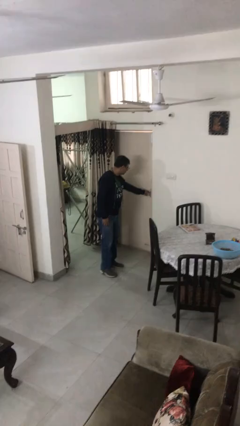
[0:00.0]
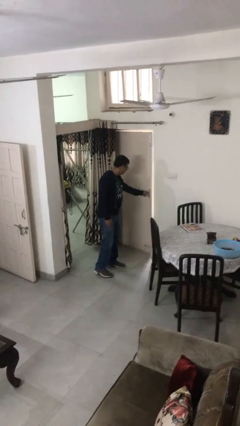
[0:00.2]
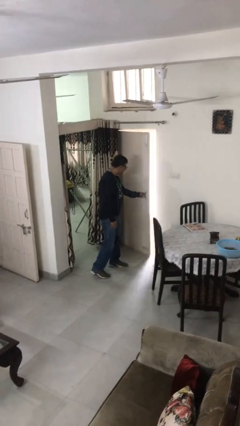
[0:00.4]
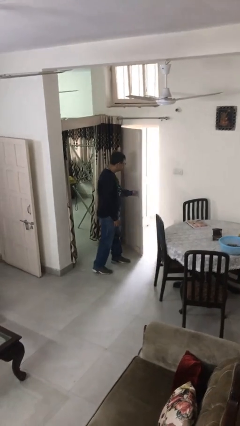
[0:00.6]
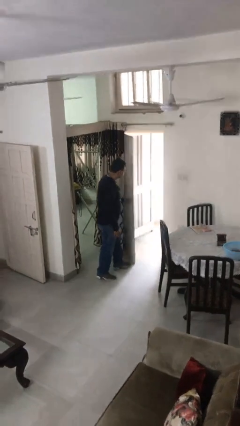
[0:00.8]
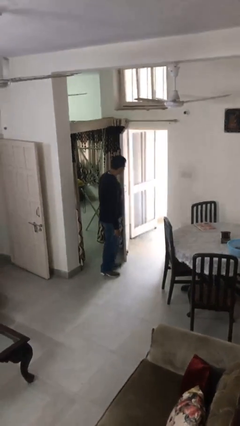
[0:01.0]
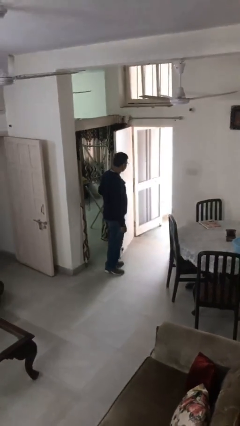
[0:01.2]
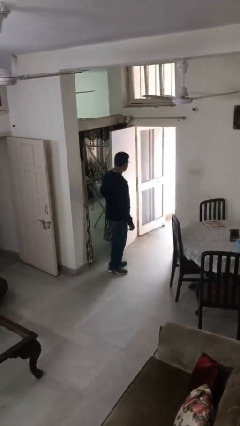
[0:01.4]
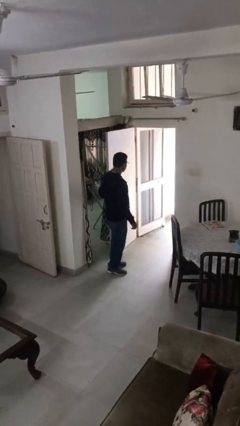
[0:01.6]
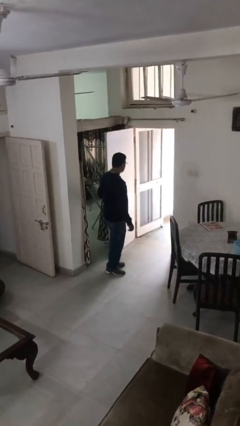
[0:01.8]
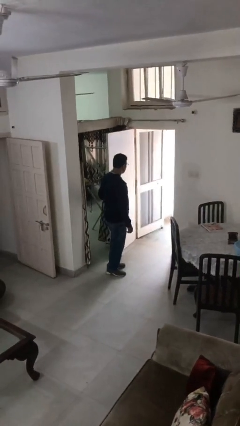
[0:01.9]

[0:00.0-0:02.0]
person opens facility door

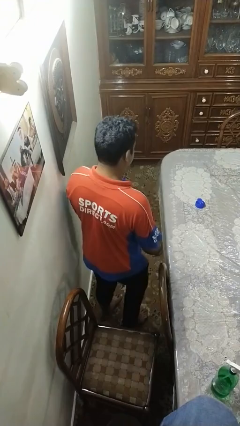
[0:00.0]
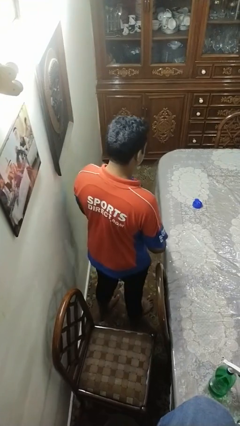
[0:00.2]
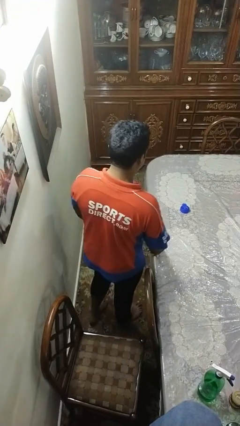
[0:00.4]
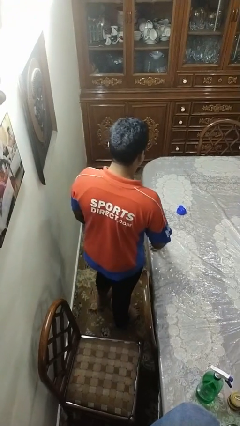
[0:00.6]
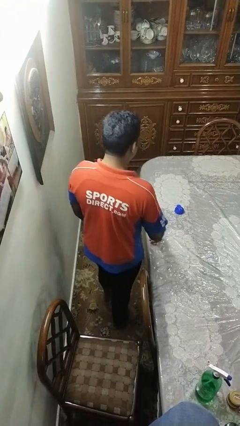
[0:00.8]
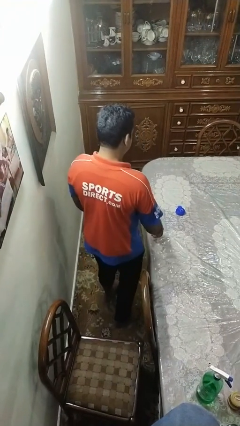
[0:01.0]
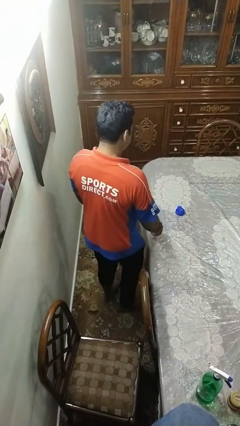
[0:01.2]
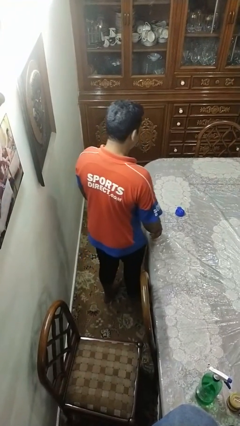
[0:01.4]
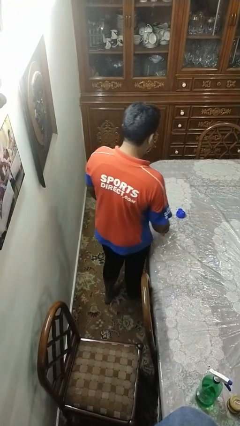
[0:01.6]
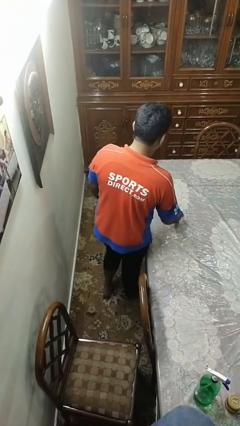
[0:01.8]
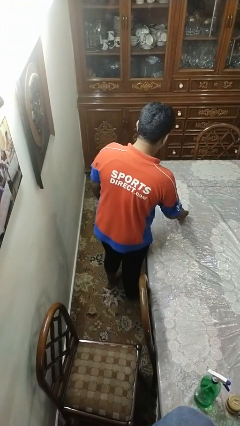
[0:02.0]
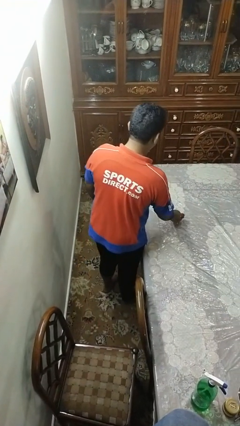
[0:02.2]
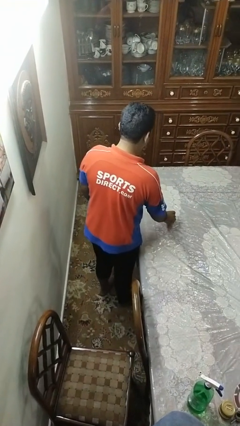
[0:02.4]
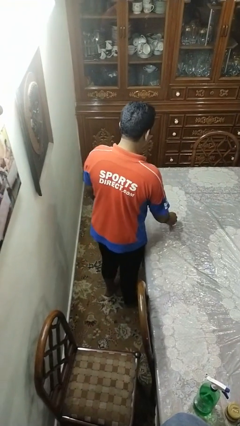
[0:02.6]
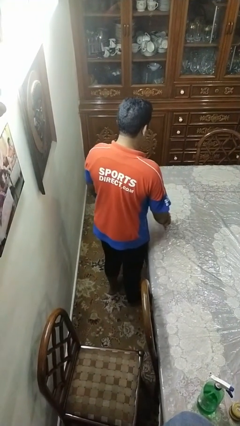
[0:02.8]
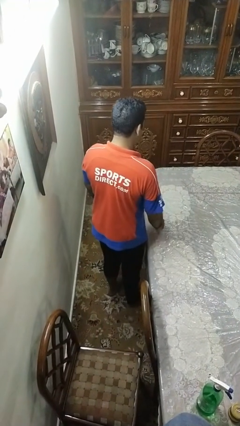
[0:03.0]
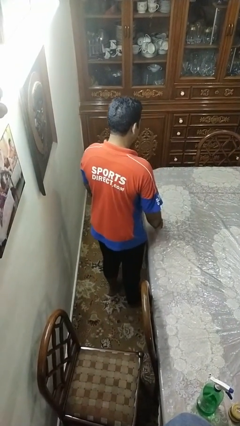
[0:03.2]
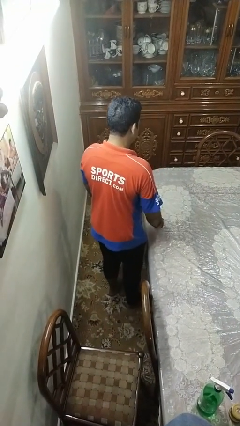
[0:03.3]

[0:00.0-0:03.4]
person picks up object from table

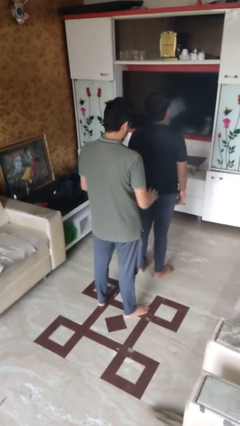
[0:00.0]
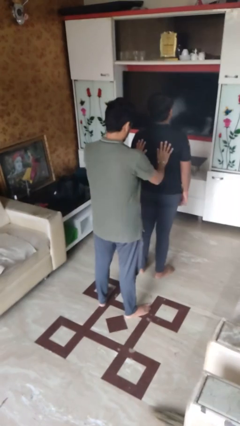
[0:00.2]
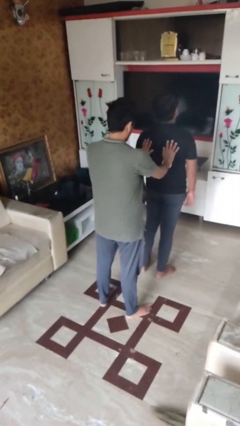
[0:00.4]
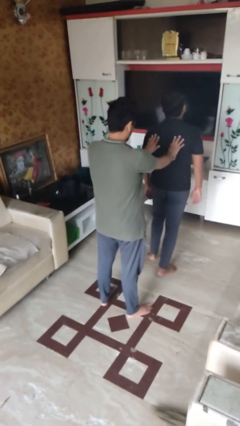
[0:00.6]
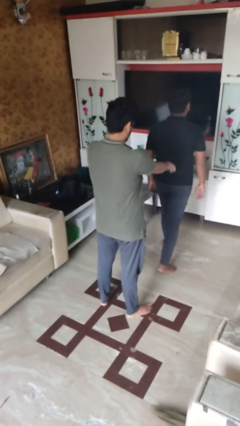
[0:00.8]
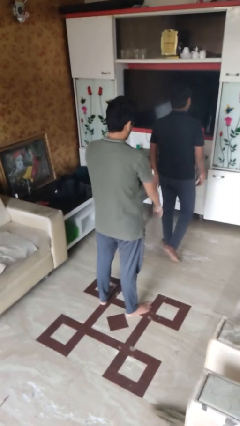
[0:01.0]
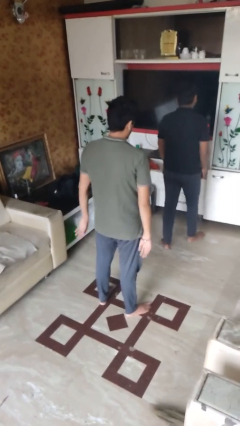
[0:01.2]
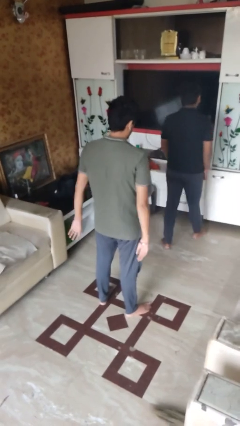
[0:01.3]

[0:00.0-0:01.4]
person shoves person

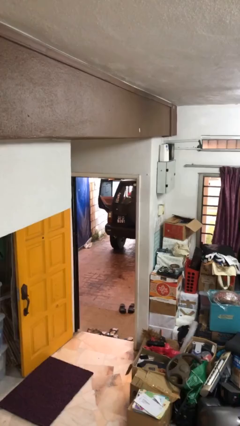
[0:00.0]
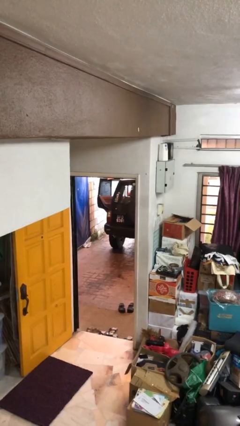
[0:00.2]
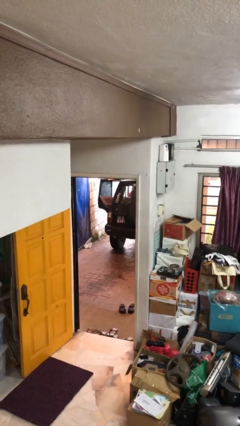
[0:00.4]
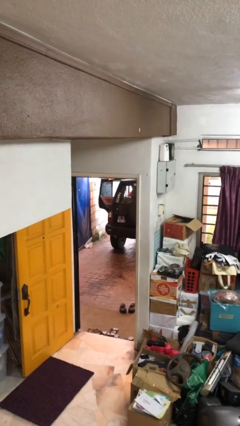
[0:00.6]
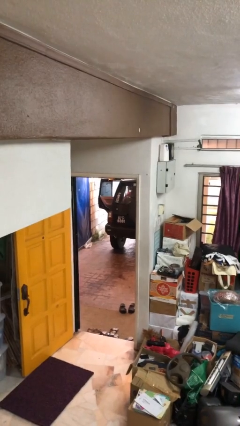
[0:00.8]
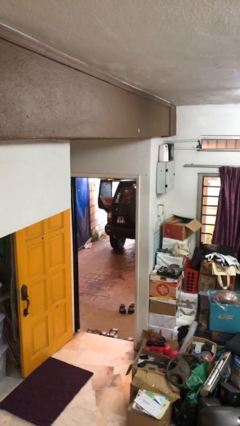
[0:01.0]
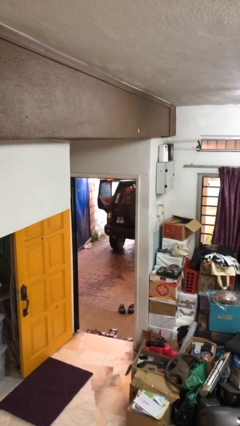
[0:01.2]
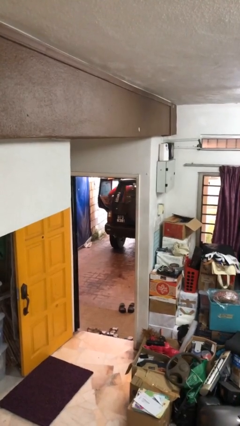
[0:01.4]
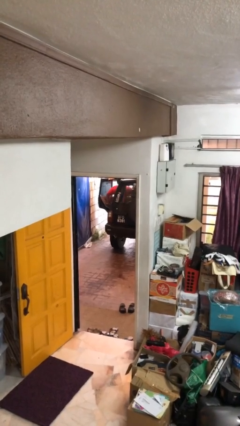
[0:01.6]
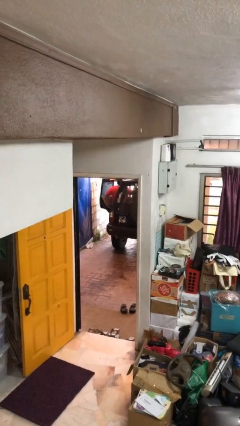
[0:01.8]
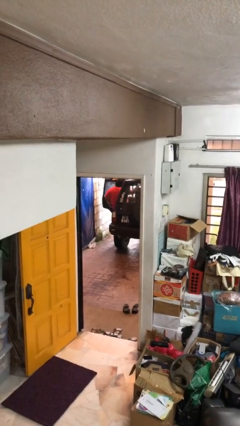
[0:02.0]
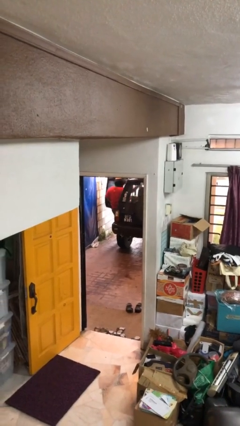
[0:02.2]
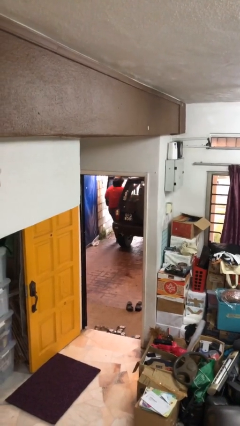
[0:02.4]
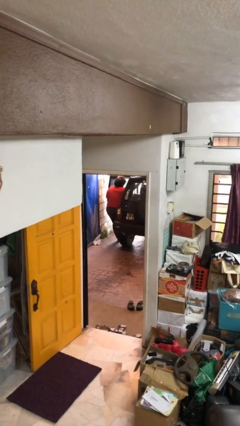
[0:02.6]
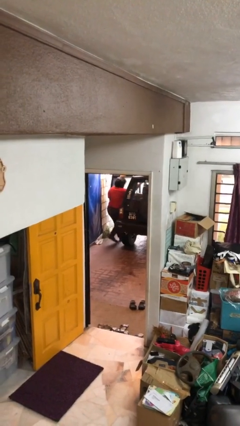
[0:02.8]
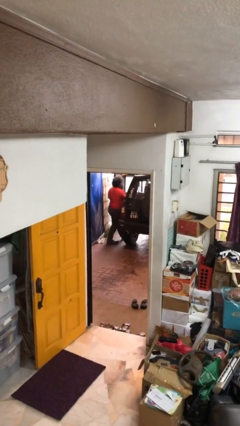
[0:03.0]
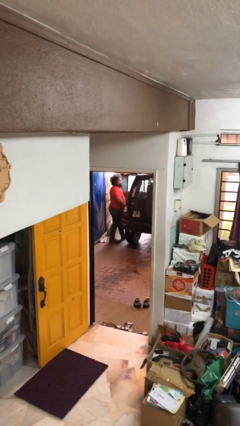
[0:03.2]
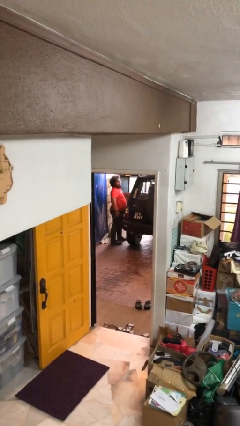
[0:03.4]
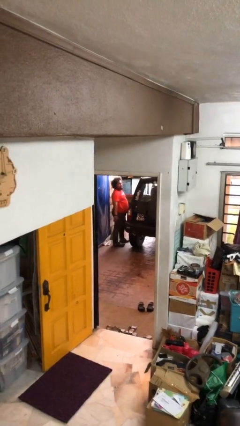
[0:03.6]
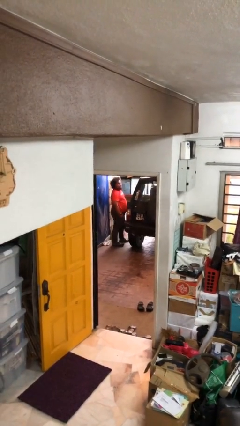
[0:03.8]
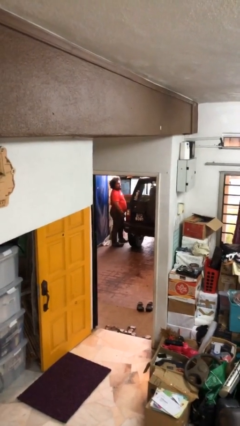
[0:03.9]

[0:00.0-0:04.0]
person exits car

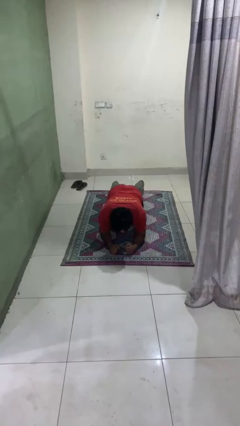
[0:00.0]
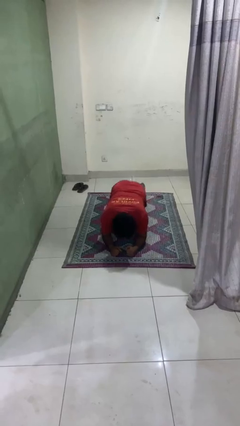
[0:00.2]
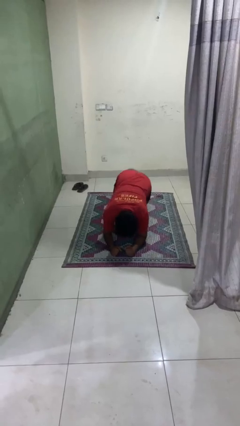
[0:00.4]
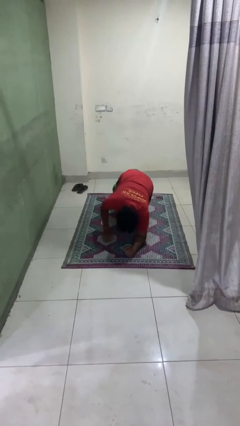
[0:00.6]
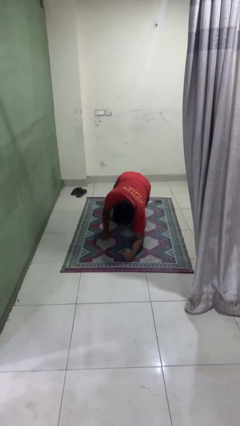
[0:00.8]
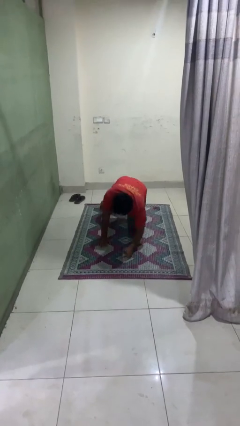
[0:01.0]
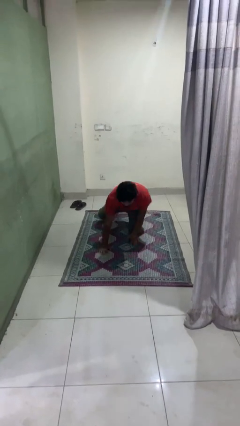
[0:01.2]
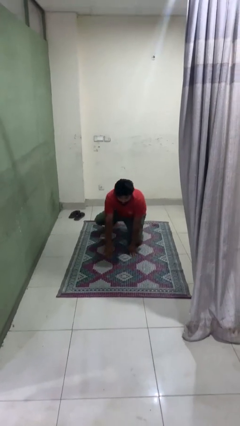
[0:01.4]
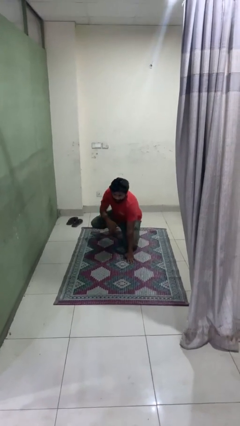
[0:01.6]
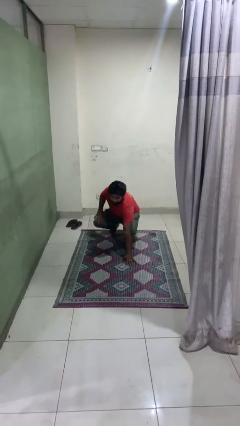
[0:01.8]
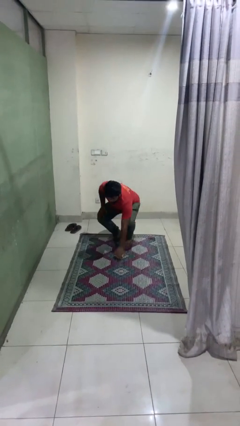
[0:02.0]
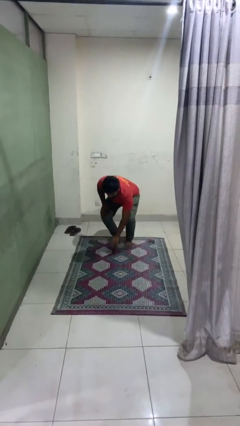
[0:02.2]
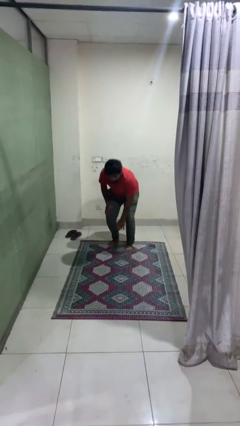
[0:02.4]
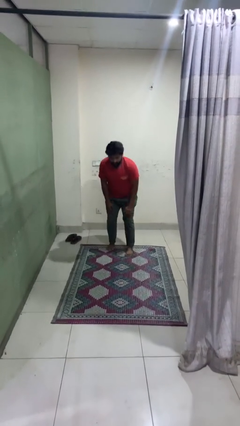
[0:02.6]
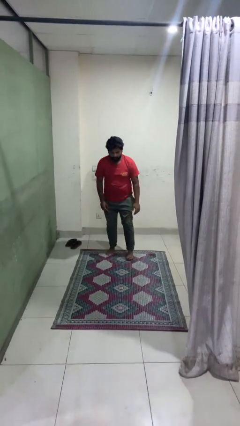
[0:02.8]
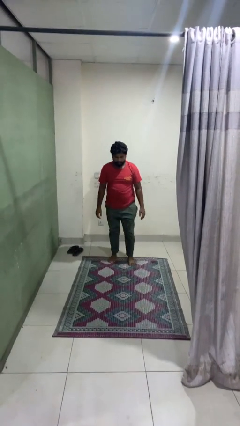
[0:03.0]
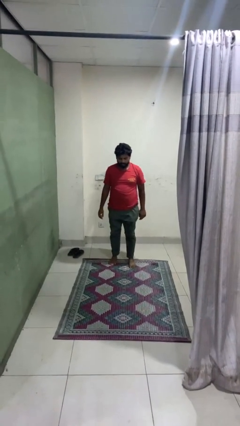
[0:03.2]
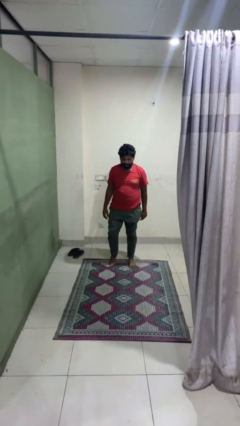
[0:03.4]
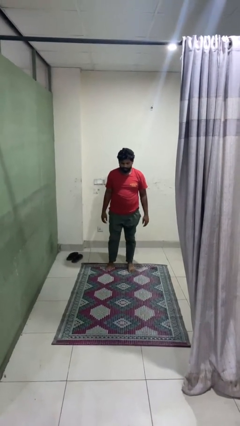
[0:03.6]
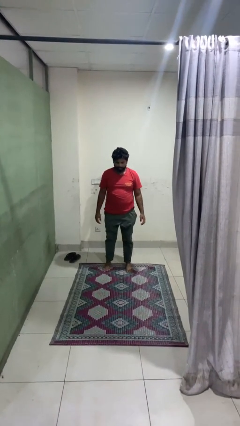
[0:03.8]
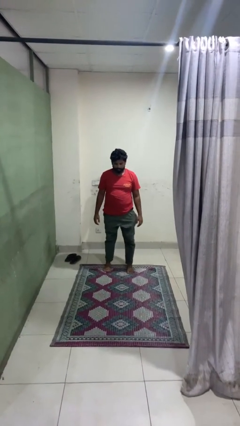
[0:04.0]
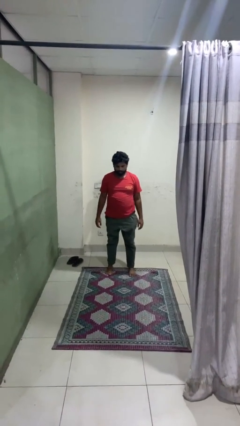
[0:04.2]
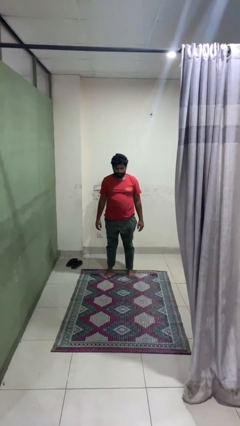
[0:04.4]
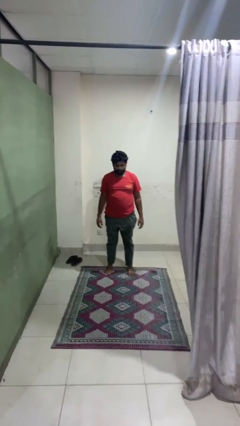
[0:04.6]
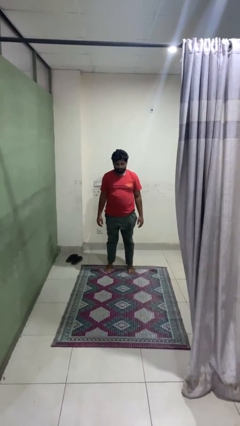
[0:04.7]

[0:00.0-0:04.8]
person stands up from floor

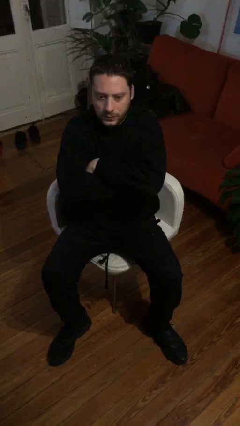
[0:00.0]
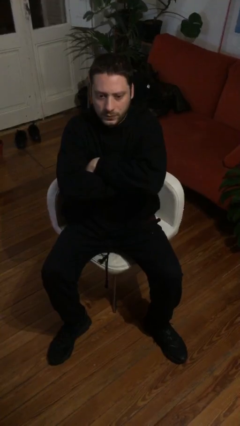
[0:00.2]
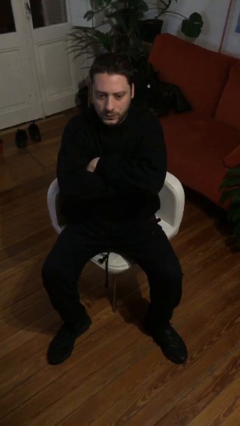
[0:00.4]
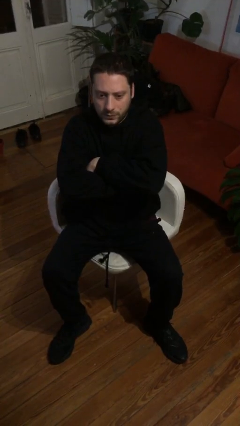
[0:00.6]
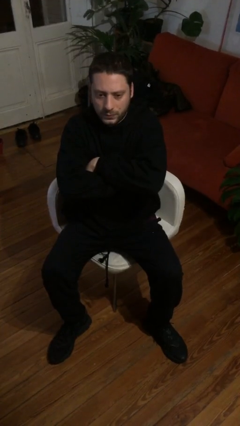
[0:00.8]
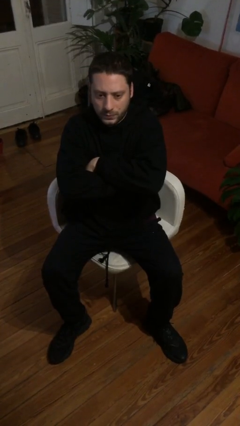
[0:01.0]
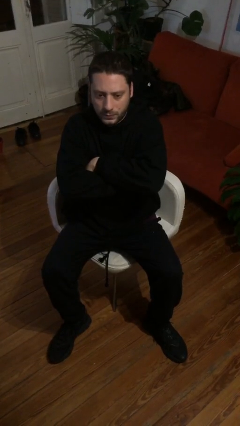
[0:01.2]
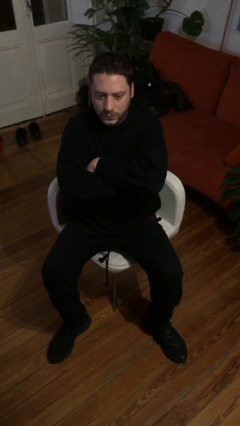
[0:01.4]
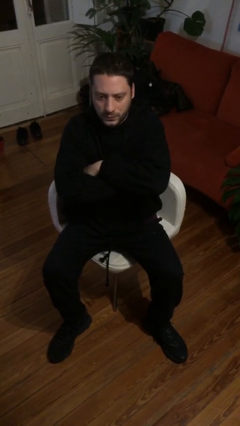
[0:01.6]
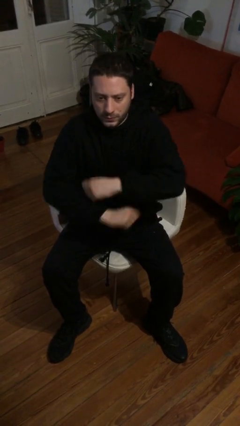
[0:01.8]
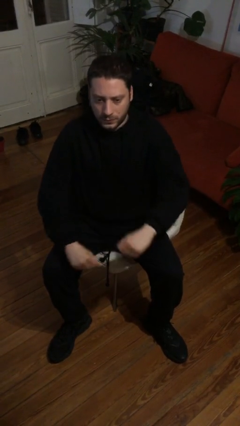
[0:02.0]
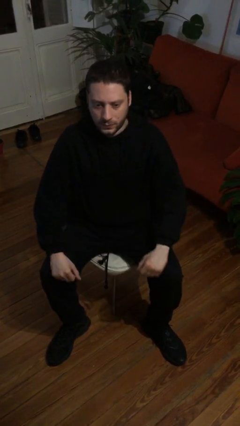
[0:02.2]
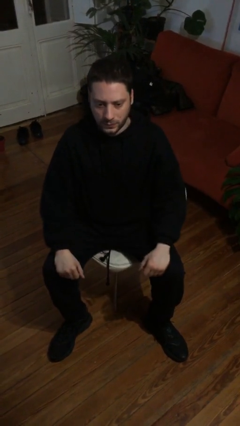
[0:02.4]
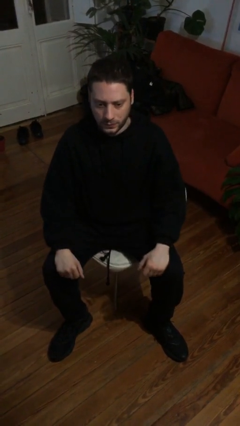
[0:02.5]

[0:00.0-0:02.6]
person crosses arms
